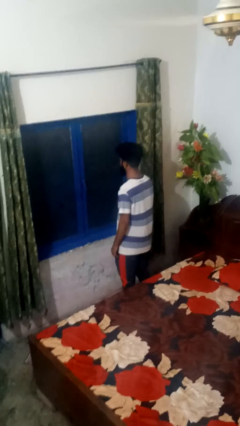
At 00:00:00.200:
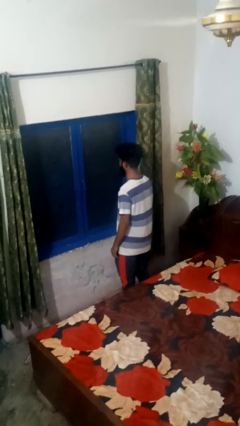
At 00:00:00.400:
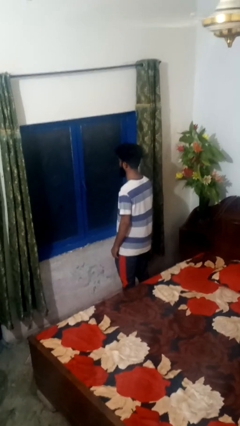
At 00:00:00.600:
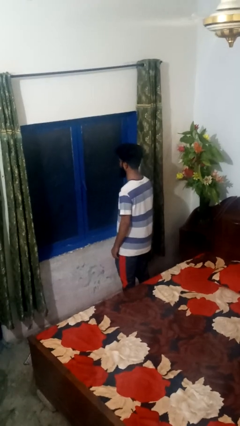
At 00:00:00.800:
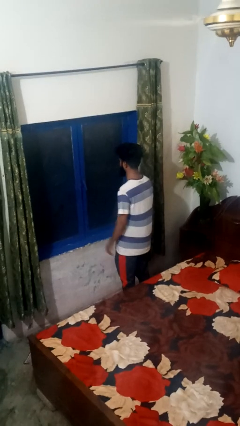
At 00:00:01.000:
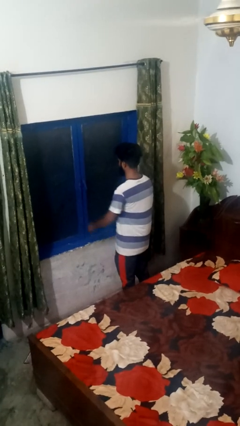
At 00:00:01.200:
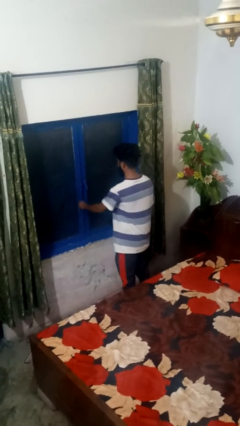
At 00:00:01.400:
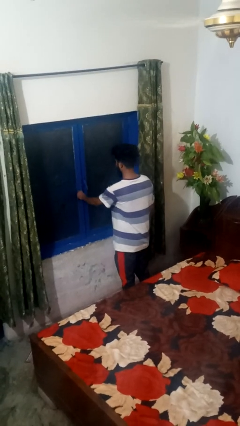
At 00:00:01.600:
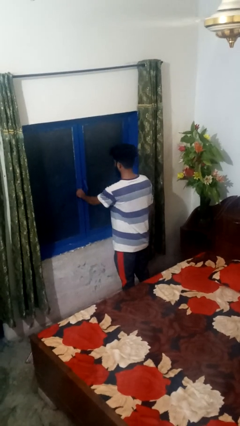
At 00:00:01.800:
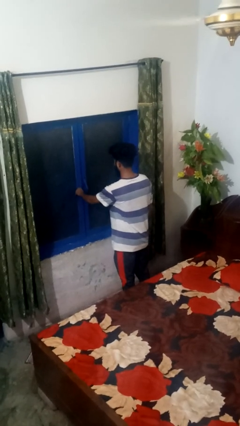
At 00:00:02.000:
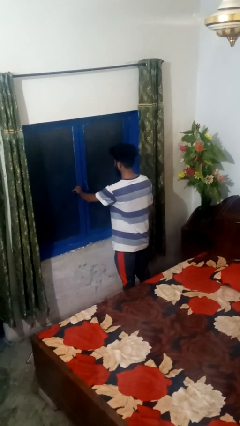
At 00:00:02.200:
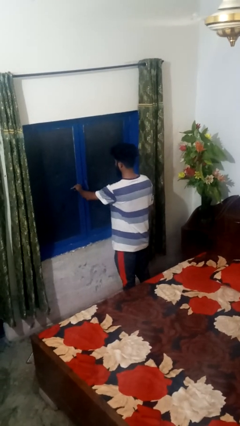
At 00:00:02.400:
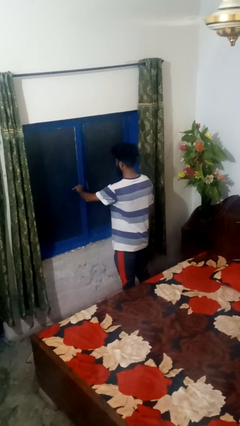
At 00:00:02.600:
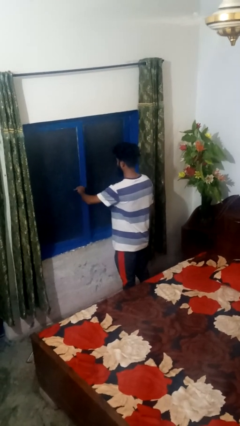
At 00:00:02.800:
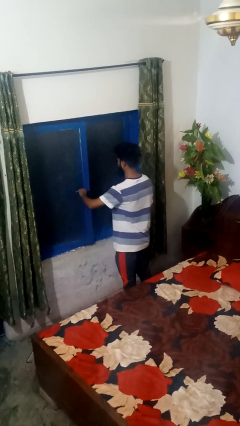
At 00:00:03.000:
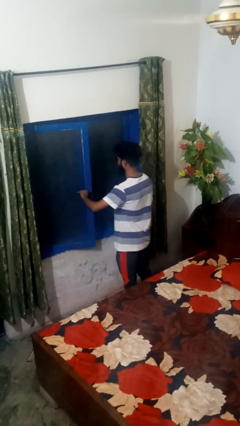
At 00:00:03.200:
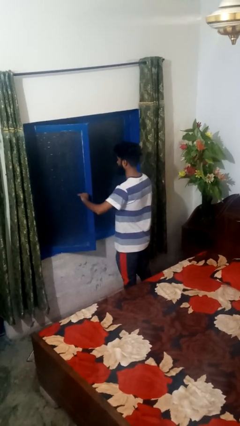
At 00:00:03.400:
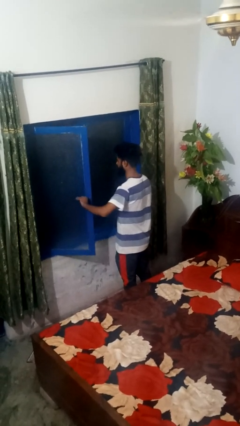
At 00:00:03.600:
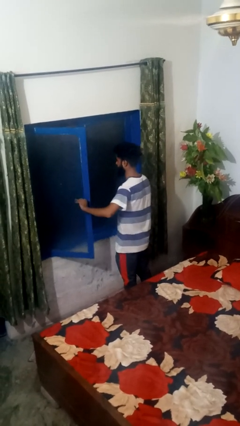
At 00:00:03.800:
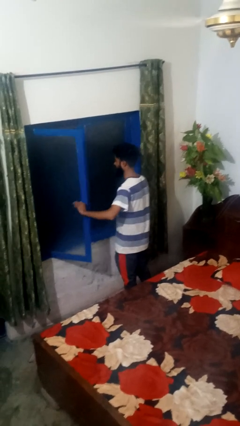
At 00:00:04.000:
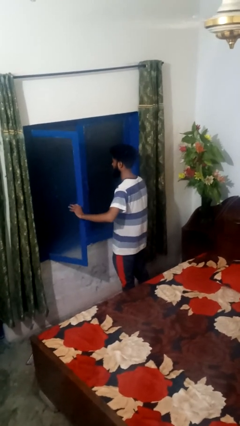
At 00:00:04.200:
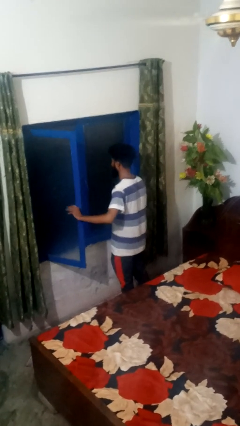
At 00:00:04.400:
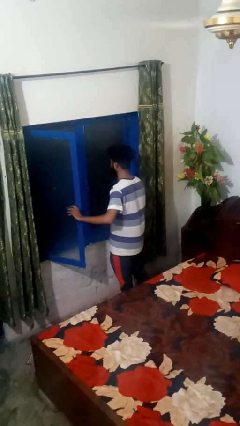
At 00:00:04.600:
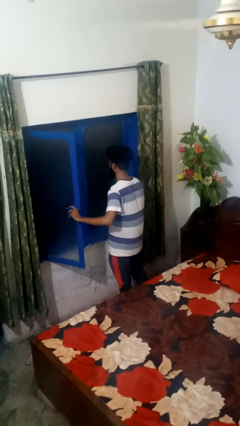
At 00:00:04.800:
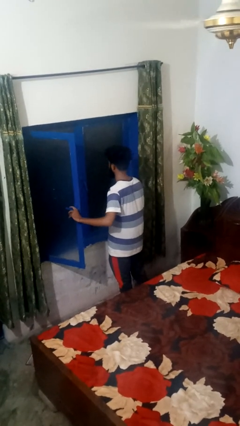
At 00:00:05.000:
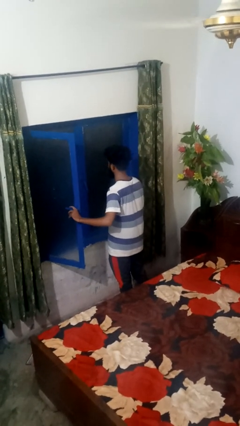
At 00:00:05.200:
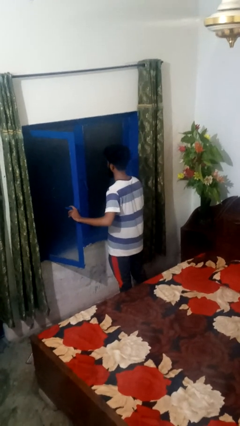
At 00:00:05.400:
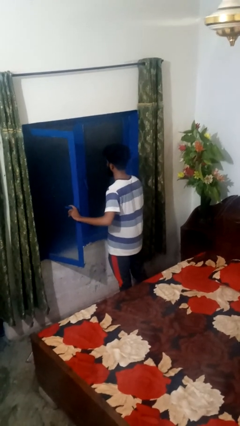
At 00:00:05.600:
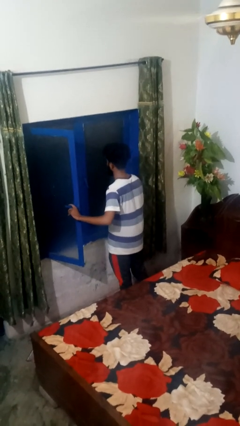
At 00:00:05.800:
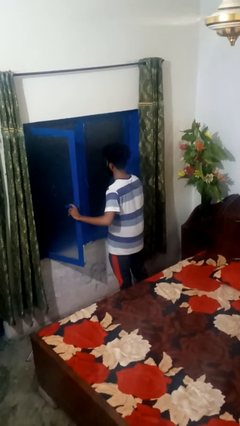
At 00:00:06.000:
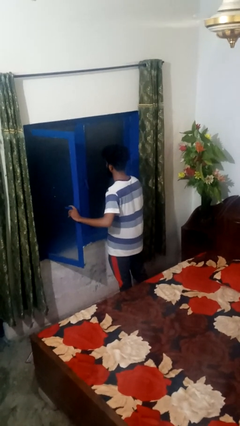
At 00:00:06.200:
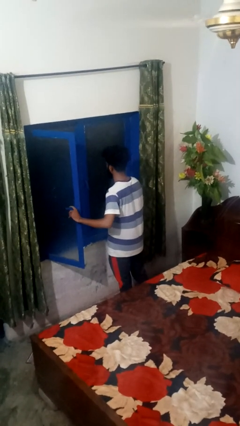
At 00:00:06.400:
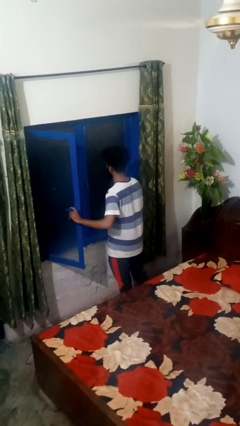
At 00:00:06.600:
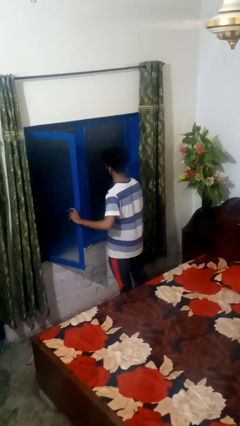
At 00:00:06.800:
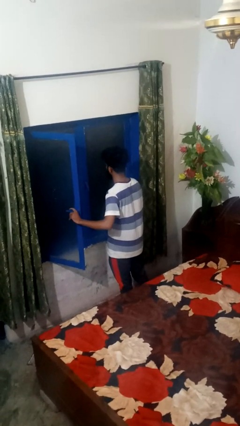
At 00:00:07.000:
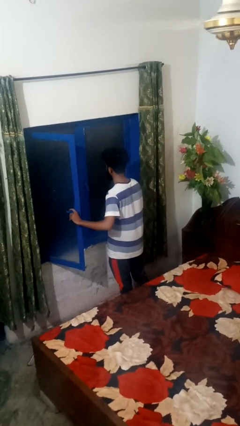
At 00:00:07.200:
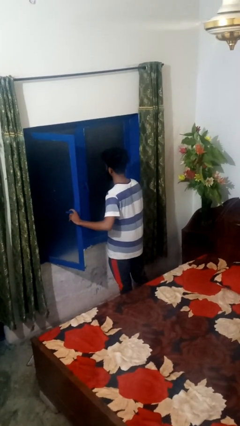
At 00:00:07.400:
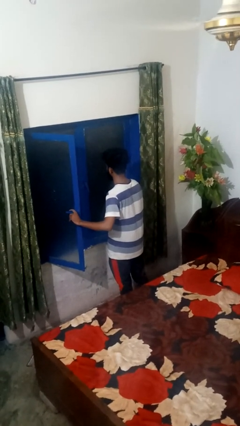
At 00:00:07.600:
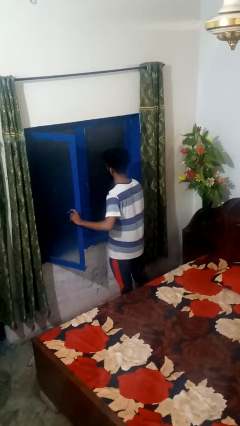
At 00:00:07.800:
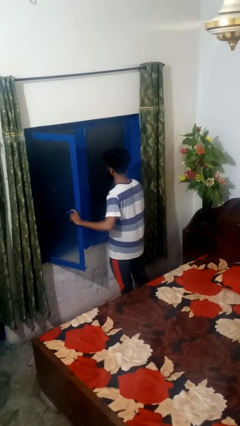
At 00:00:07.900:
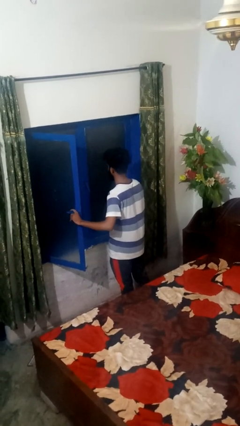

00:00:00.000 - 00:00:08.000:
person opens home window

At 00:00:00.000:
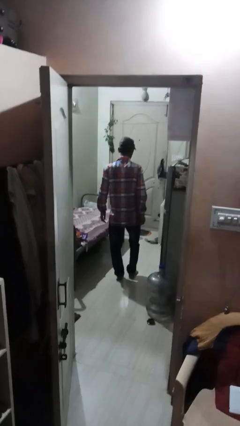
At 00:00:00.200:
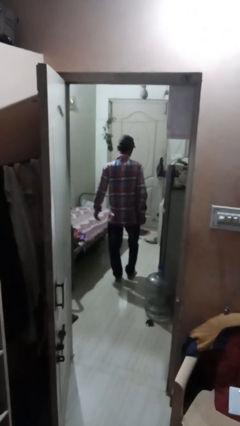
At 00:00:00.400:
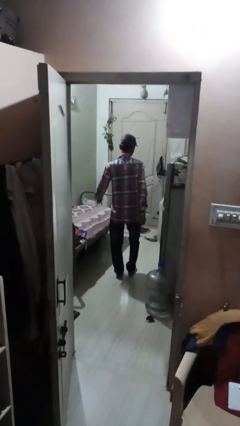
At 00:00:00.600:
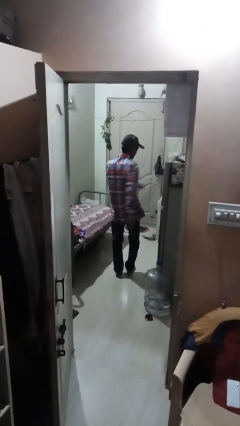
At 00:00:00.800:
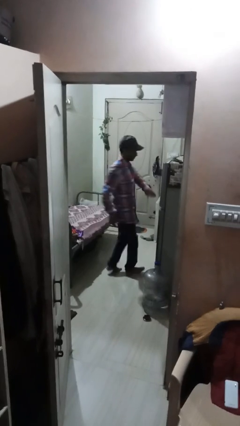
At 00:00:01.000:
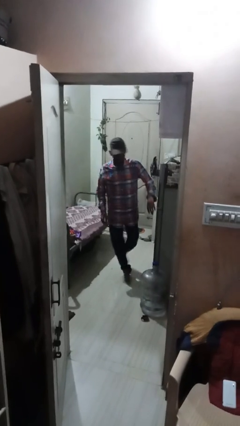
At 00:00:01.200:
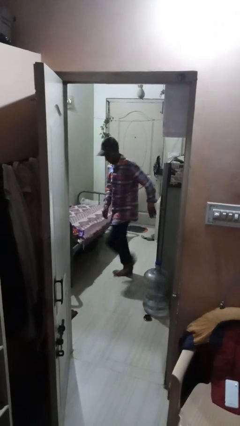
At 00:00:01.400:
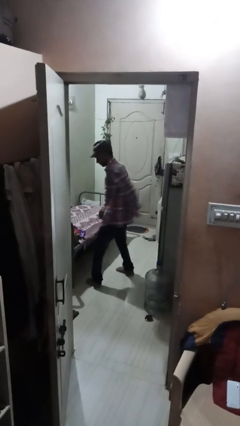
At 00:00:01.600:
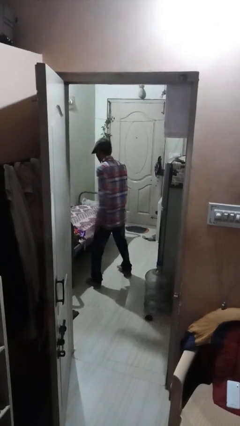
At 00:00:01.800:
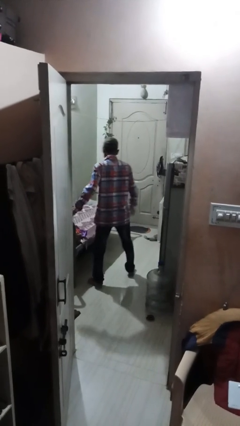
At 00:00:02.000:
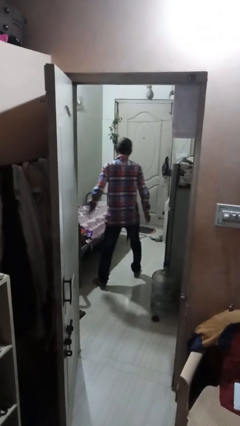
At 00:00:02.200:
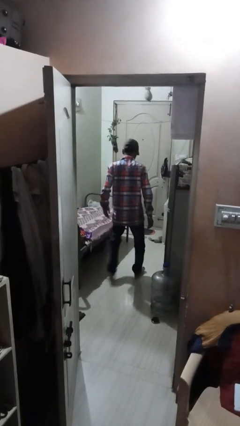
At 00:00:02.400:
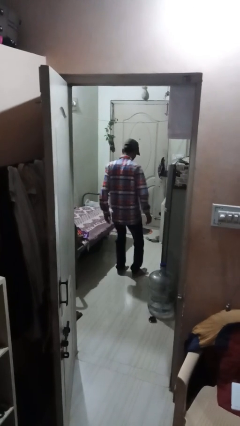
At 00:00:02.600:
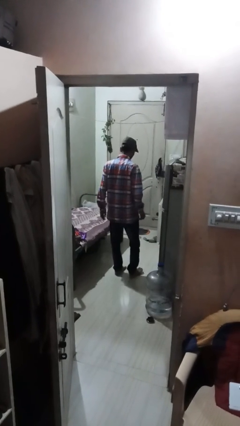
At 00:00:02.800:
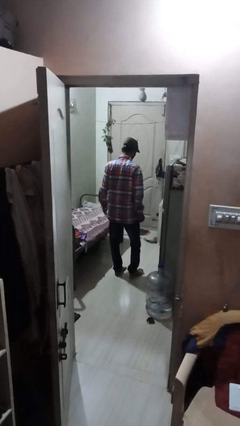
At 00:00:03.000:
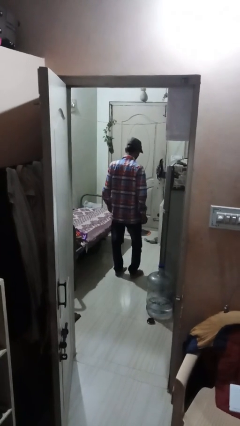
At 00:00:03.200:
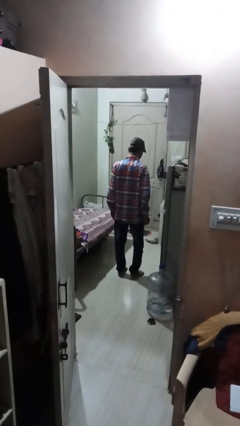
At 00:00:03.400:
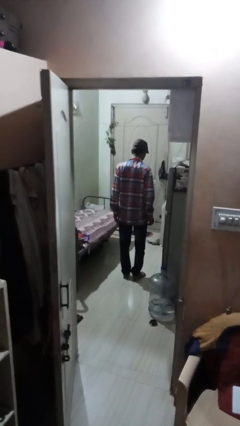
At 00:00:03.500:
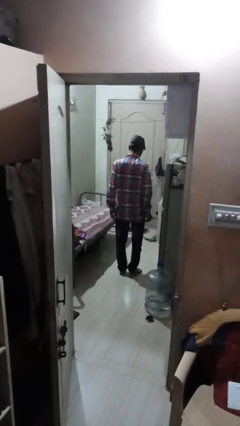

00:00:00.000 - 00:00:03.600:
person twirls

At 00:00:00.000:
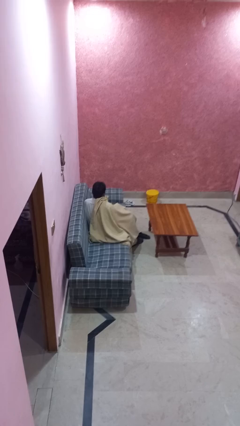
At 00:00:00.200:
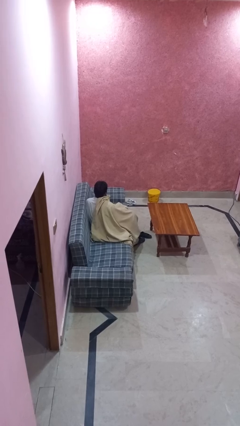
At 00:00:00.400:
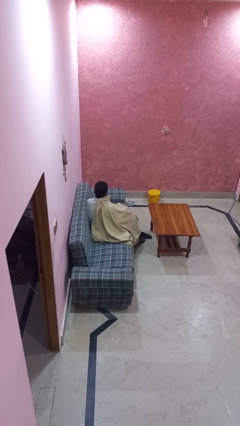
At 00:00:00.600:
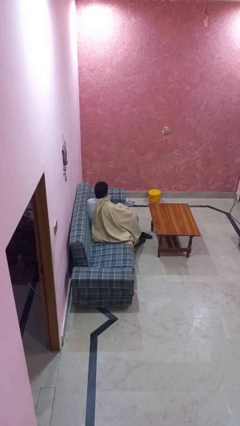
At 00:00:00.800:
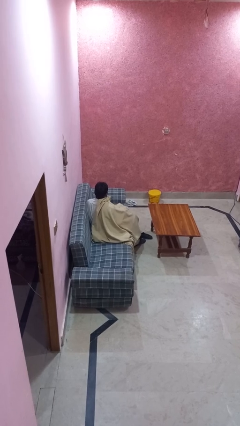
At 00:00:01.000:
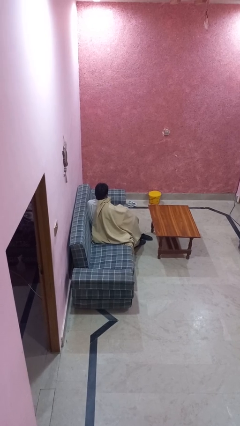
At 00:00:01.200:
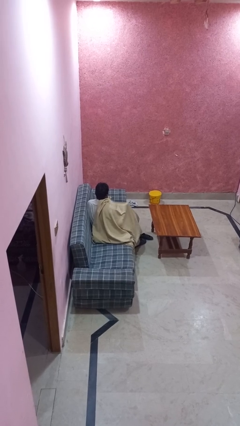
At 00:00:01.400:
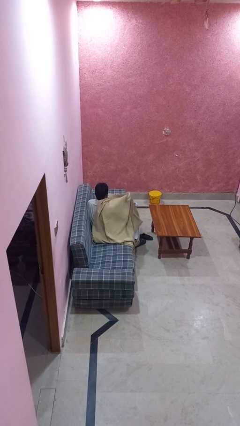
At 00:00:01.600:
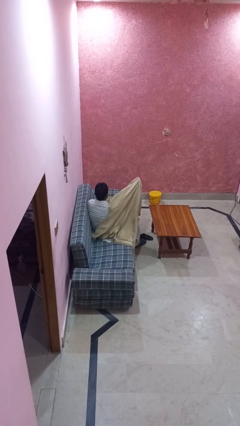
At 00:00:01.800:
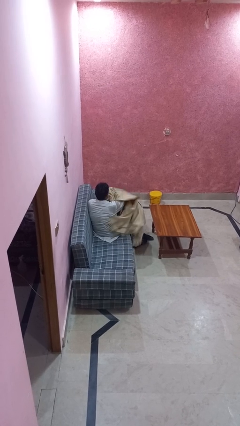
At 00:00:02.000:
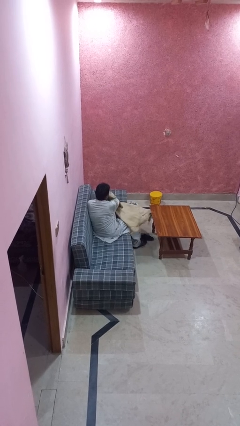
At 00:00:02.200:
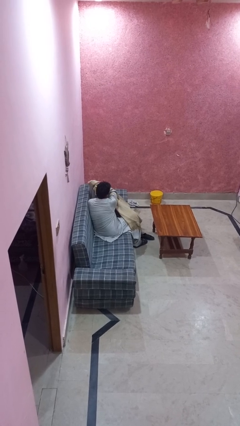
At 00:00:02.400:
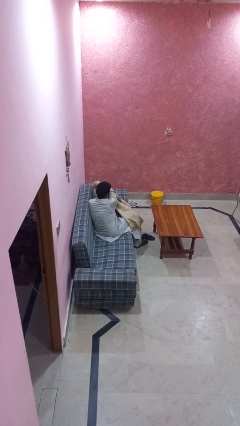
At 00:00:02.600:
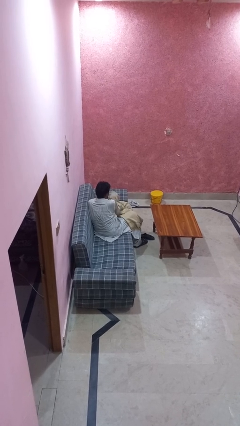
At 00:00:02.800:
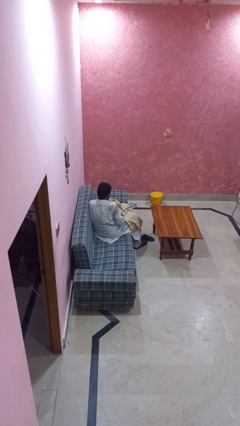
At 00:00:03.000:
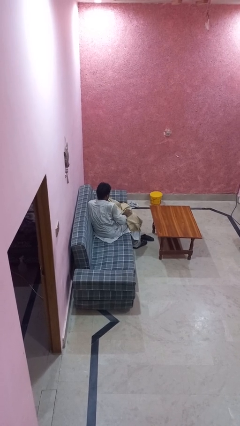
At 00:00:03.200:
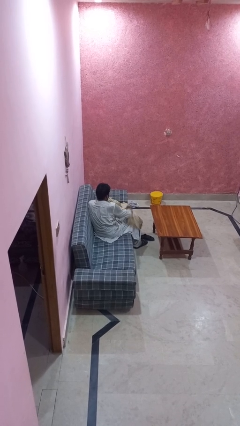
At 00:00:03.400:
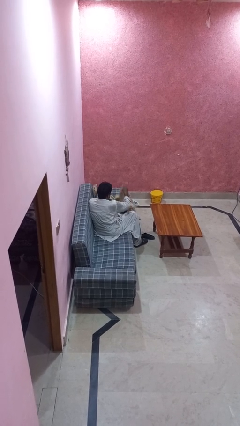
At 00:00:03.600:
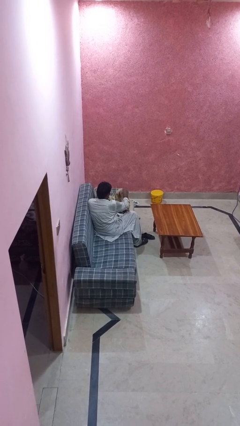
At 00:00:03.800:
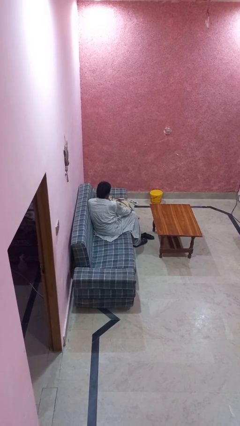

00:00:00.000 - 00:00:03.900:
person uncovers with blanket

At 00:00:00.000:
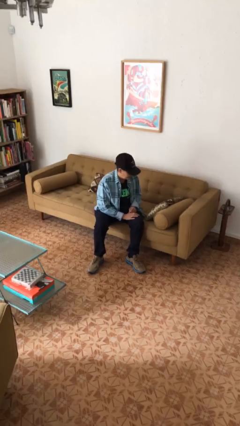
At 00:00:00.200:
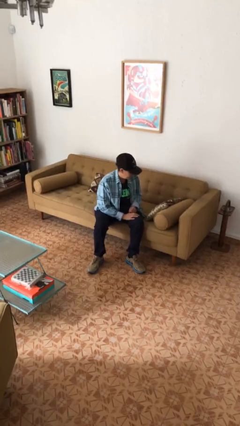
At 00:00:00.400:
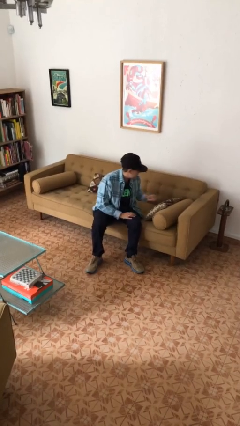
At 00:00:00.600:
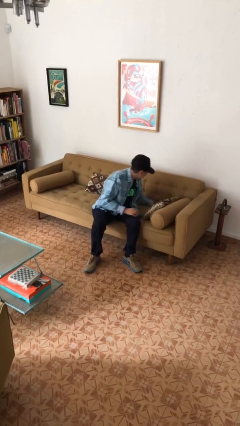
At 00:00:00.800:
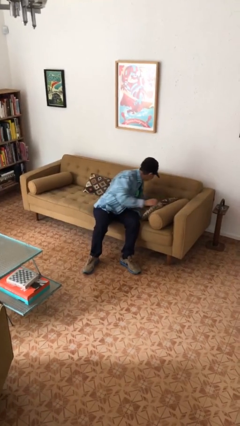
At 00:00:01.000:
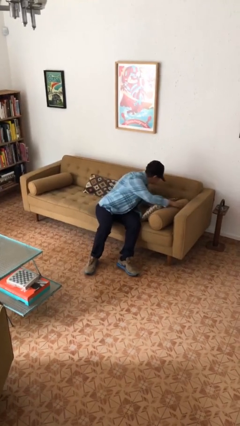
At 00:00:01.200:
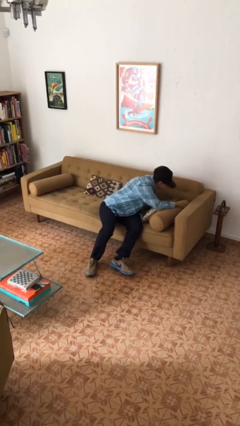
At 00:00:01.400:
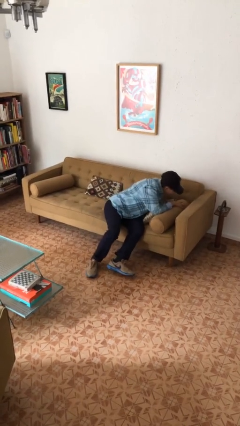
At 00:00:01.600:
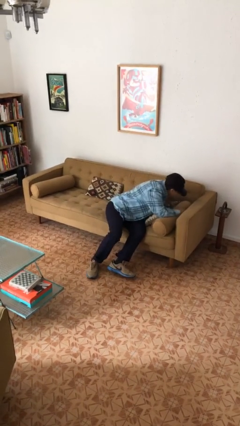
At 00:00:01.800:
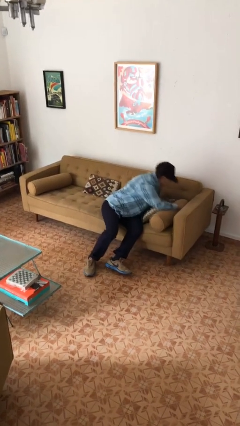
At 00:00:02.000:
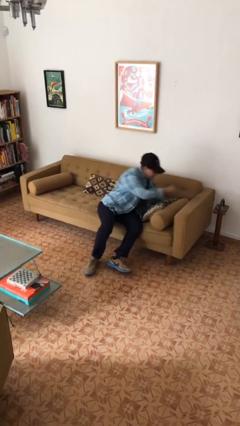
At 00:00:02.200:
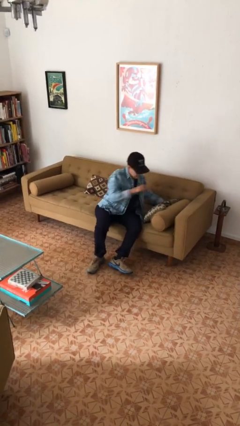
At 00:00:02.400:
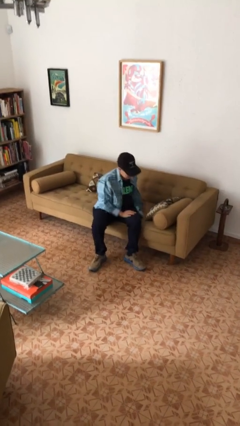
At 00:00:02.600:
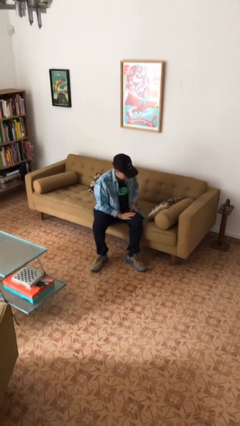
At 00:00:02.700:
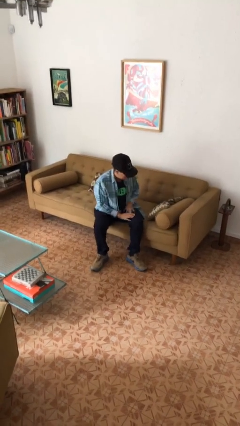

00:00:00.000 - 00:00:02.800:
person searches in couch
